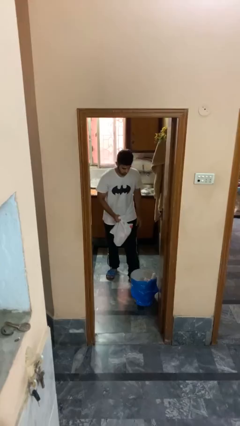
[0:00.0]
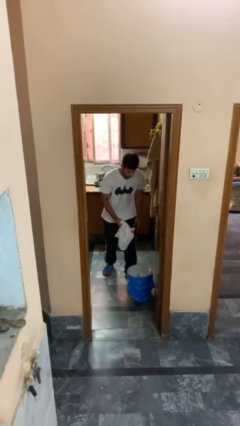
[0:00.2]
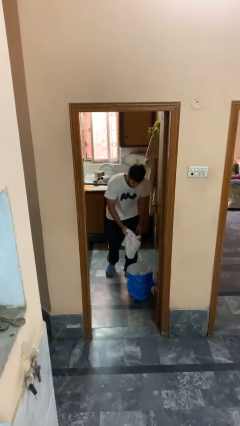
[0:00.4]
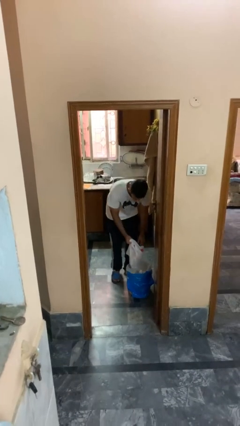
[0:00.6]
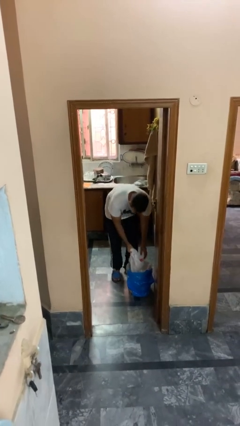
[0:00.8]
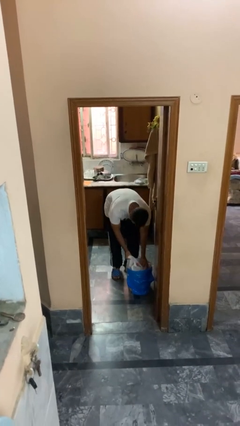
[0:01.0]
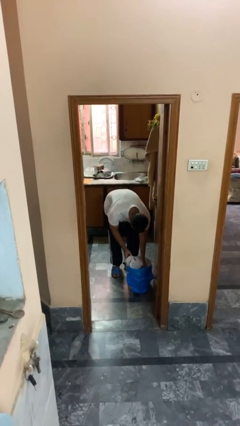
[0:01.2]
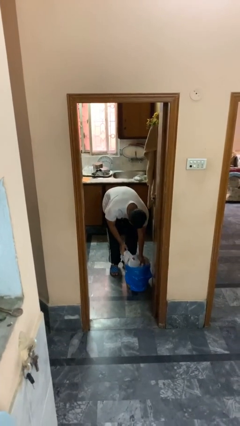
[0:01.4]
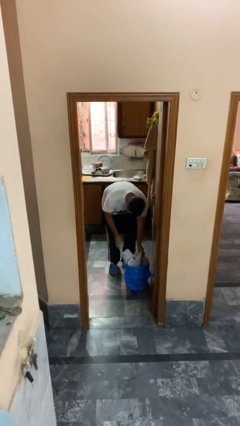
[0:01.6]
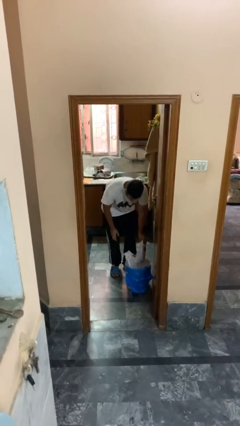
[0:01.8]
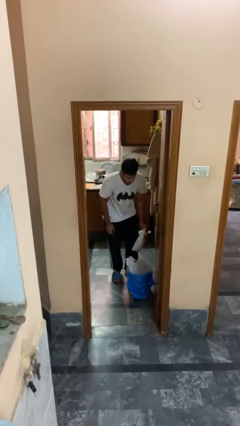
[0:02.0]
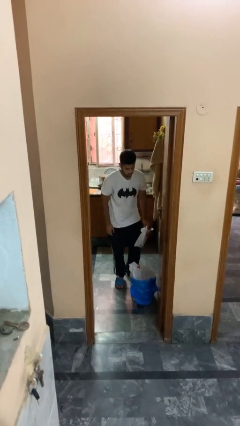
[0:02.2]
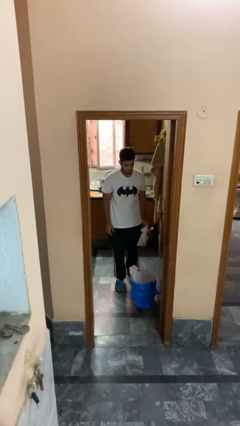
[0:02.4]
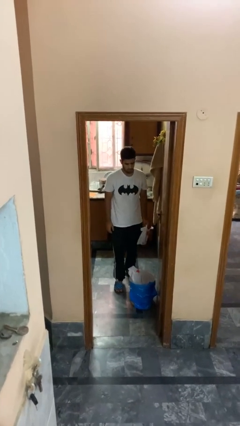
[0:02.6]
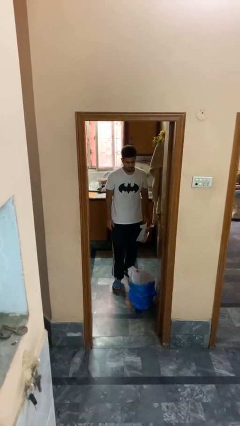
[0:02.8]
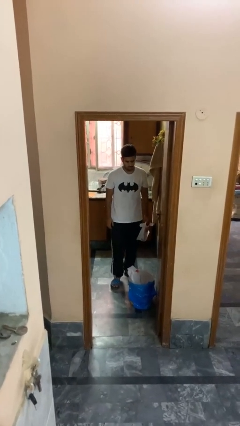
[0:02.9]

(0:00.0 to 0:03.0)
person discards trash

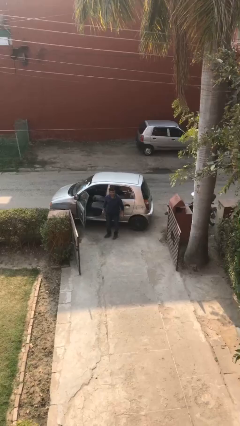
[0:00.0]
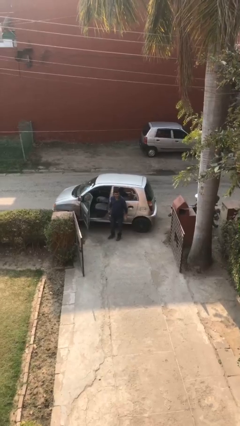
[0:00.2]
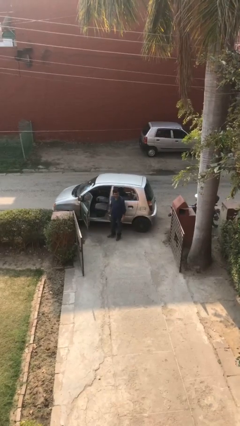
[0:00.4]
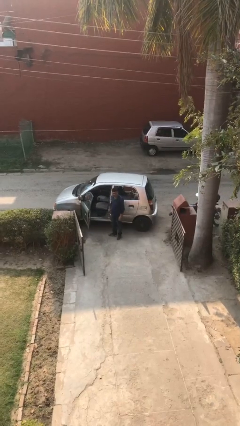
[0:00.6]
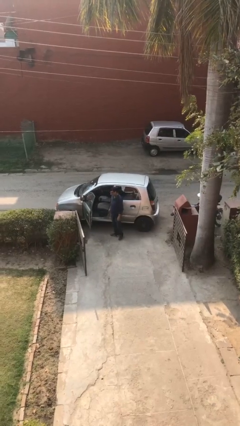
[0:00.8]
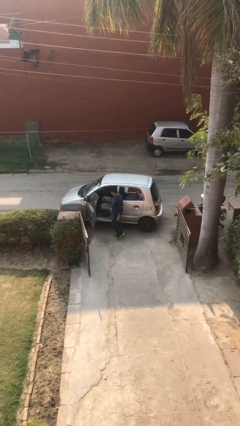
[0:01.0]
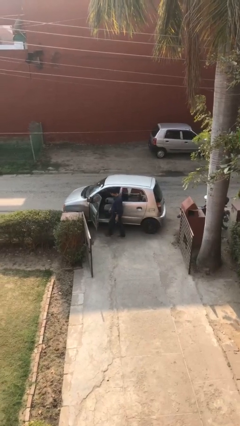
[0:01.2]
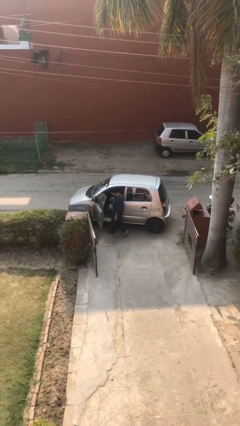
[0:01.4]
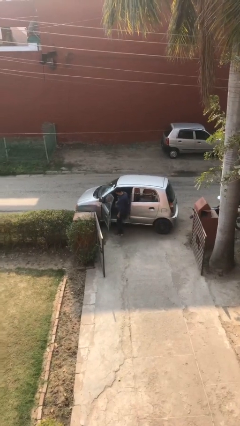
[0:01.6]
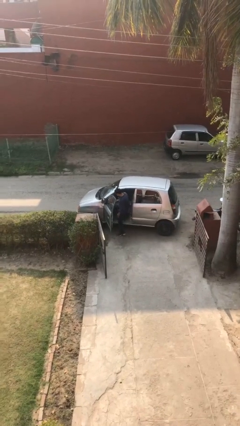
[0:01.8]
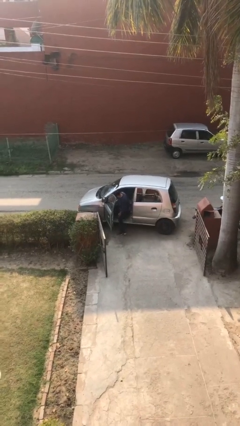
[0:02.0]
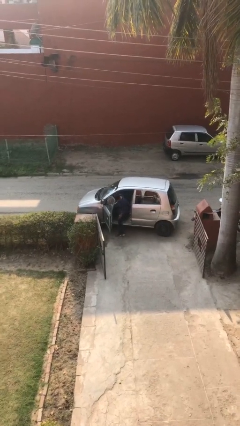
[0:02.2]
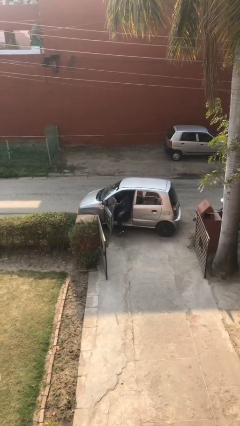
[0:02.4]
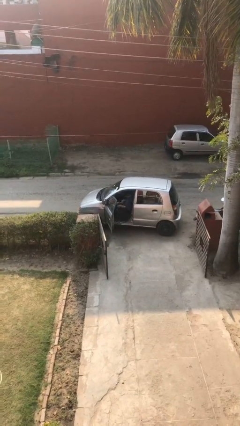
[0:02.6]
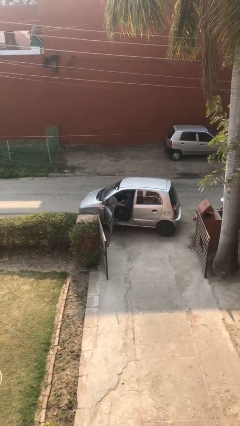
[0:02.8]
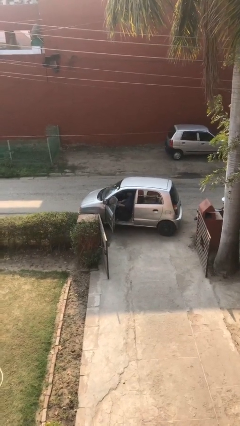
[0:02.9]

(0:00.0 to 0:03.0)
person enters car

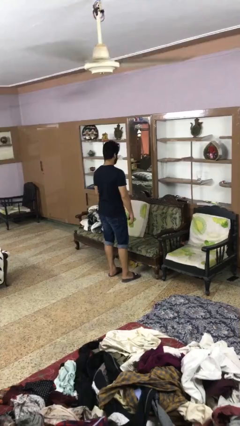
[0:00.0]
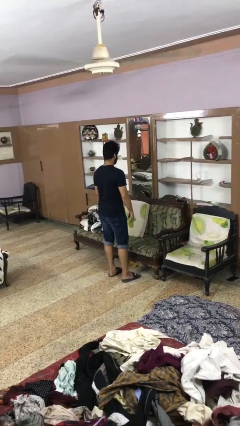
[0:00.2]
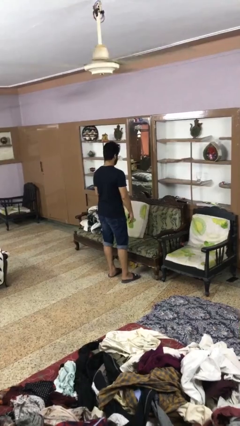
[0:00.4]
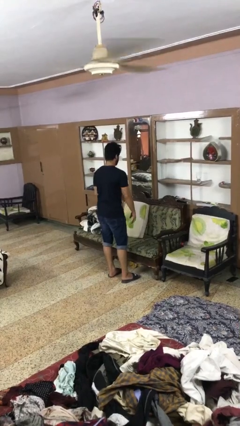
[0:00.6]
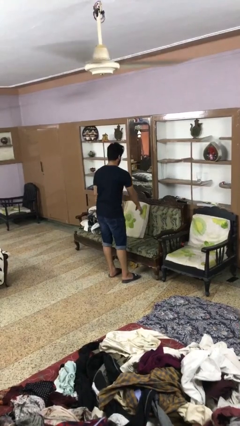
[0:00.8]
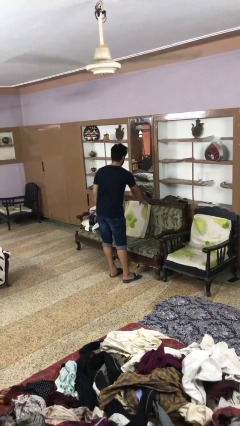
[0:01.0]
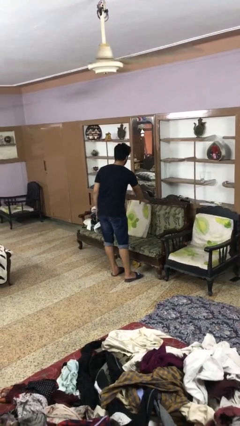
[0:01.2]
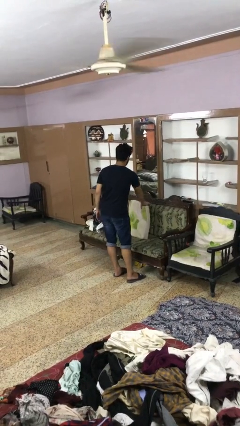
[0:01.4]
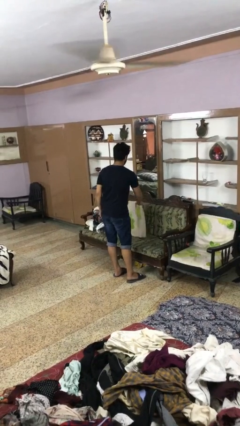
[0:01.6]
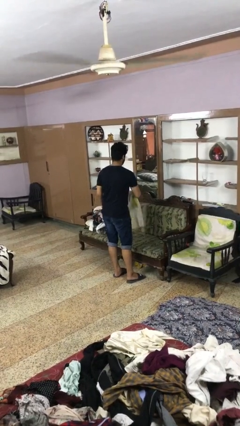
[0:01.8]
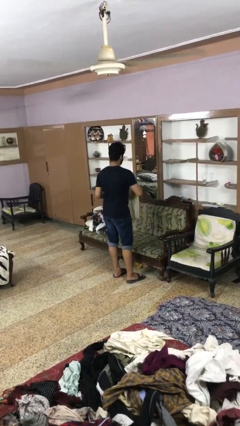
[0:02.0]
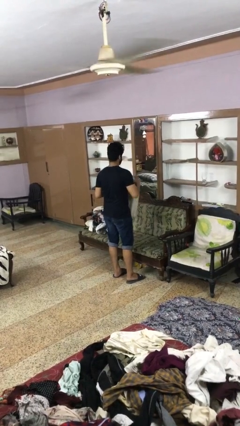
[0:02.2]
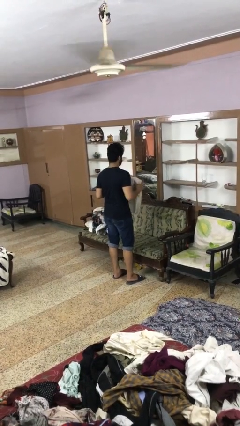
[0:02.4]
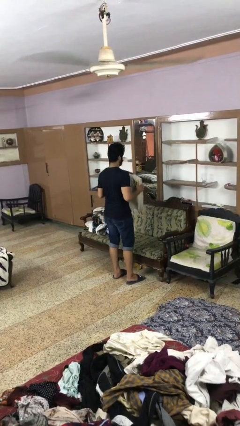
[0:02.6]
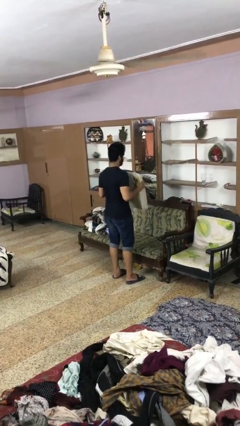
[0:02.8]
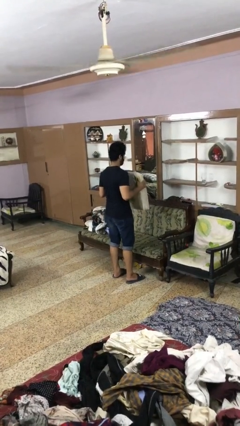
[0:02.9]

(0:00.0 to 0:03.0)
person picks up object from couch

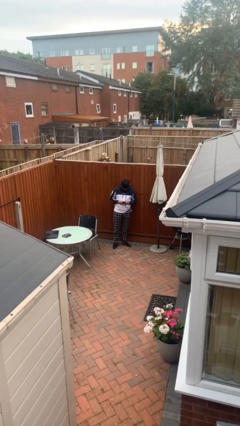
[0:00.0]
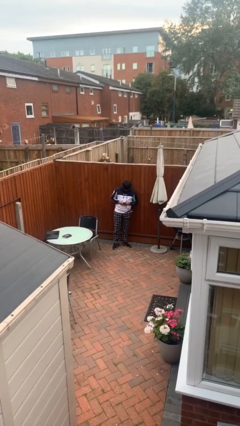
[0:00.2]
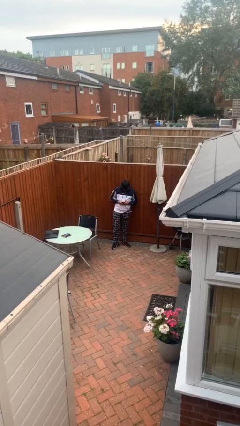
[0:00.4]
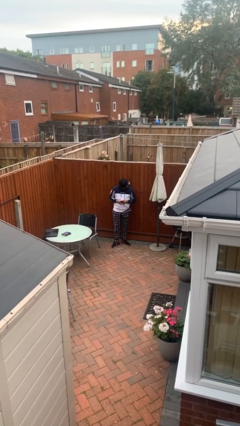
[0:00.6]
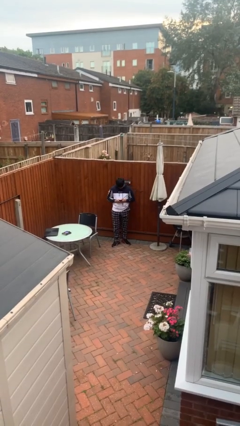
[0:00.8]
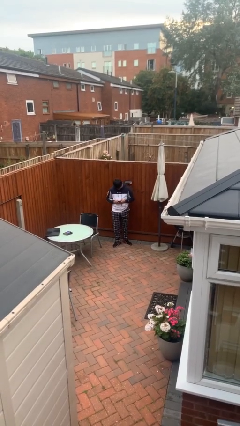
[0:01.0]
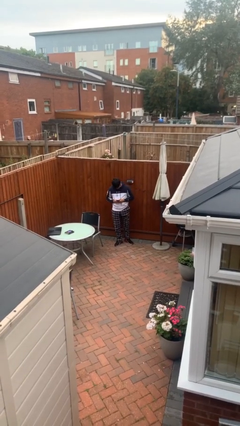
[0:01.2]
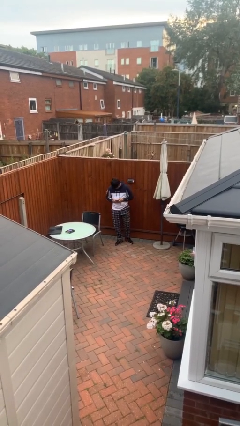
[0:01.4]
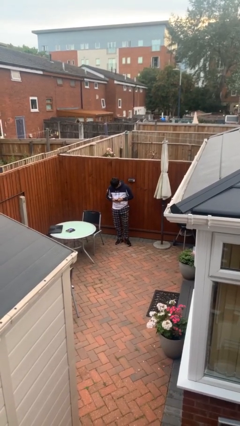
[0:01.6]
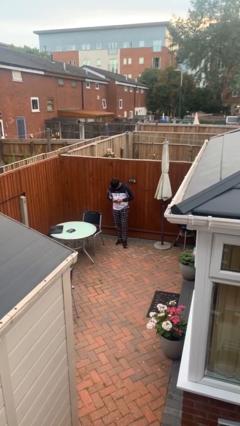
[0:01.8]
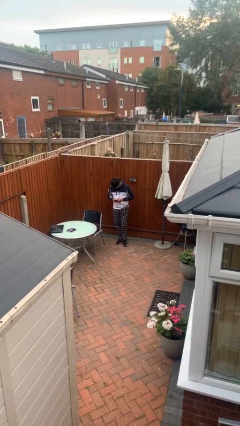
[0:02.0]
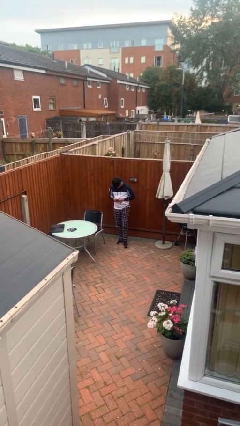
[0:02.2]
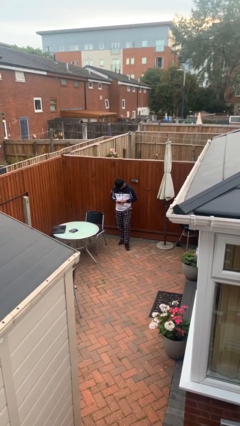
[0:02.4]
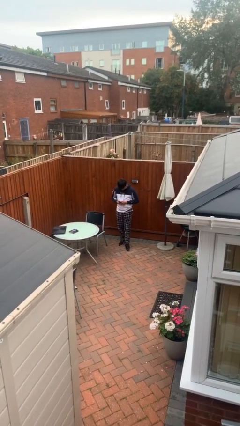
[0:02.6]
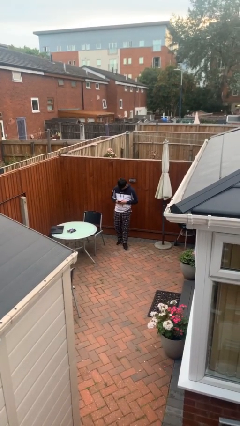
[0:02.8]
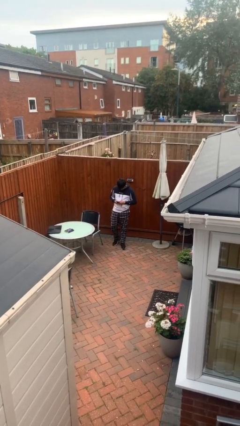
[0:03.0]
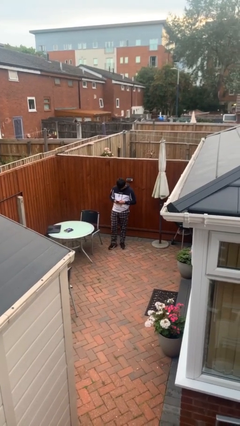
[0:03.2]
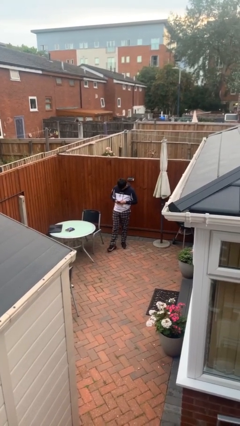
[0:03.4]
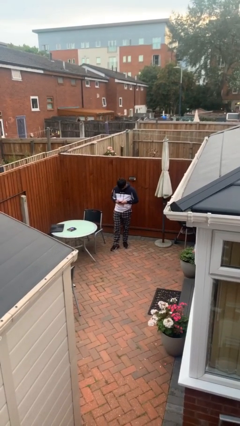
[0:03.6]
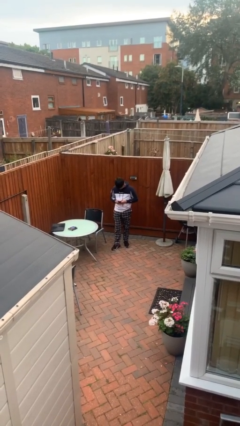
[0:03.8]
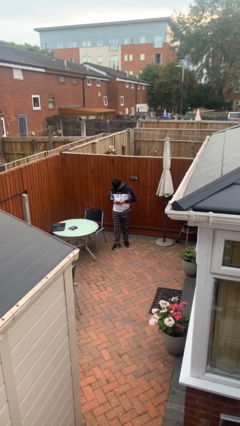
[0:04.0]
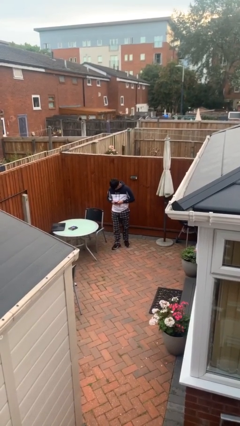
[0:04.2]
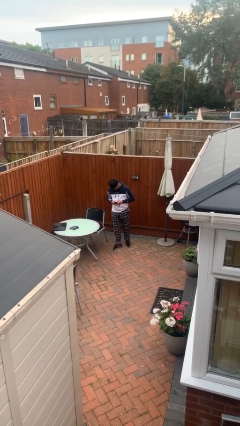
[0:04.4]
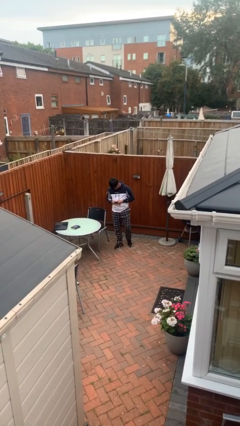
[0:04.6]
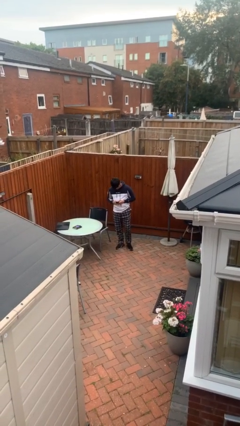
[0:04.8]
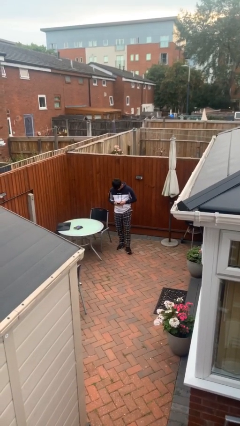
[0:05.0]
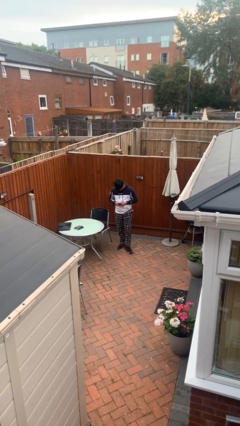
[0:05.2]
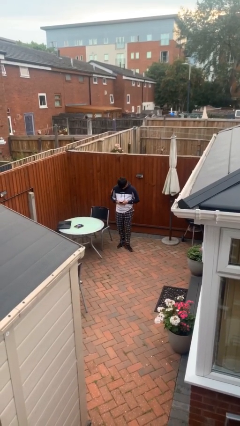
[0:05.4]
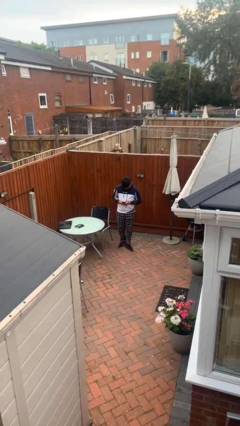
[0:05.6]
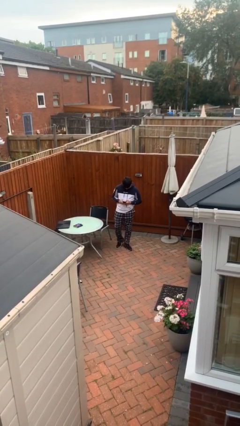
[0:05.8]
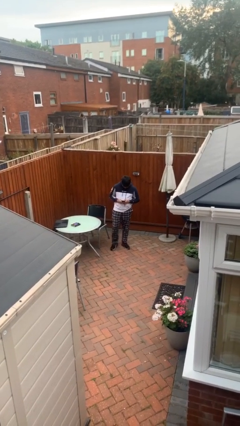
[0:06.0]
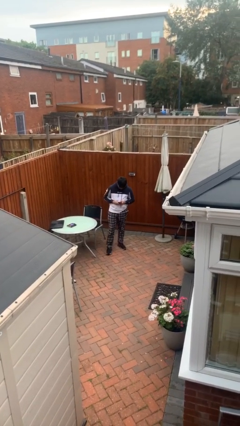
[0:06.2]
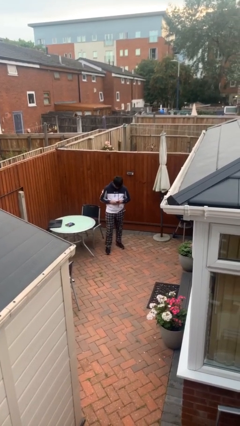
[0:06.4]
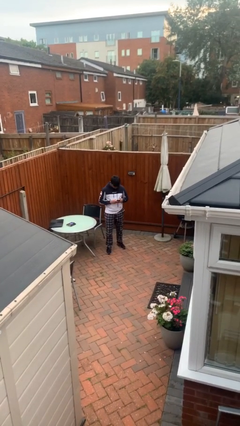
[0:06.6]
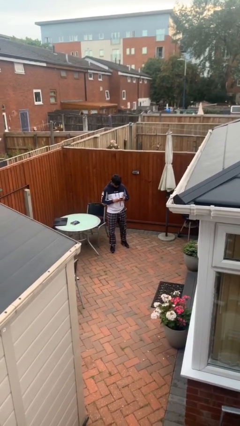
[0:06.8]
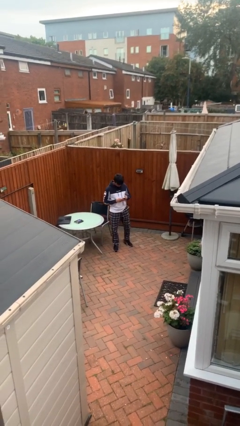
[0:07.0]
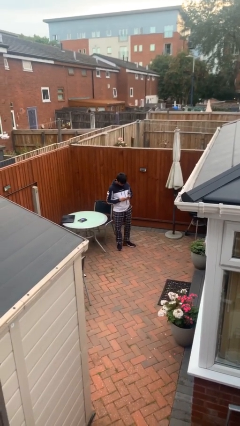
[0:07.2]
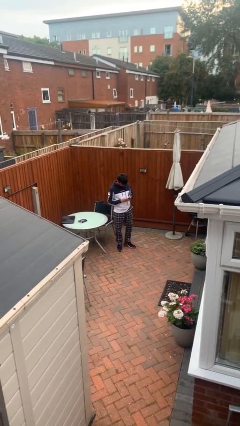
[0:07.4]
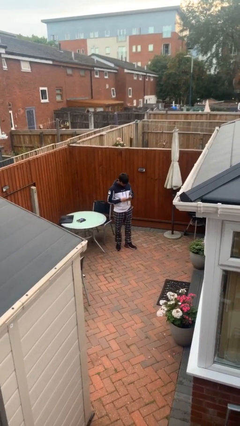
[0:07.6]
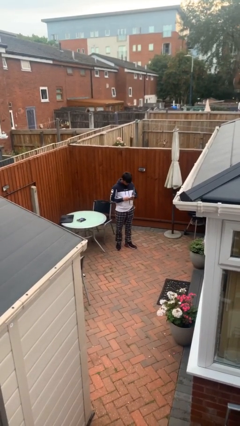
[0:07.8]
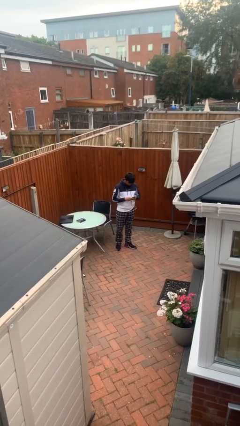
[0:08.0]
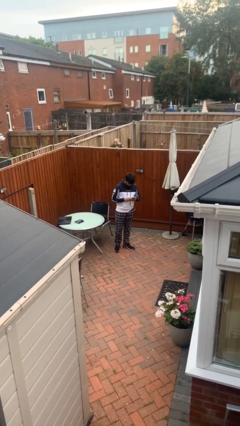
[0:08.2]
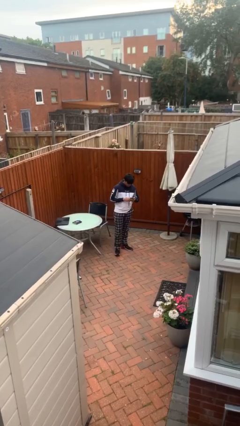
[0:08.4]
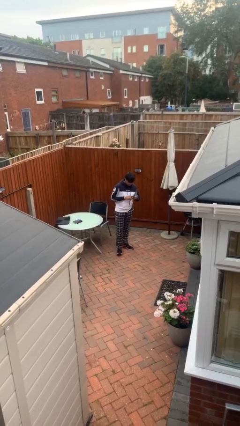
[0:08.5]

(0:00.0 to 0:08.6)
person texts on phone

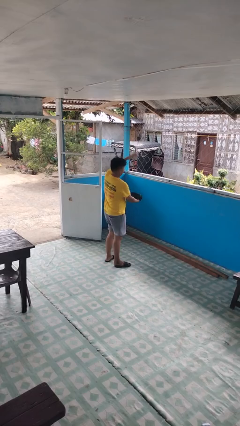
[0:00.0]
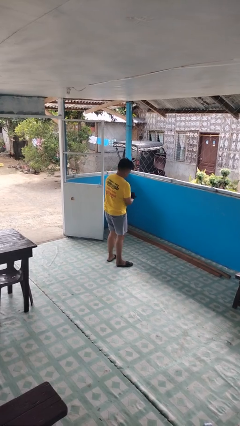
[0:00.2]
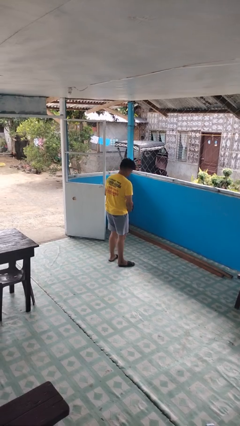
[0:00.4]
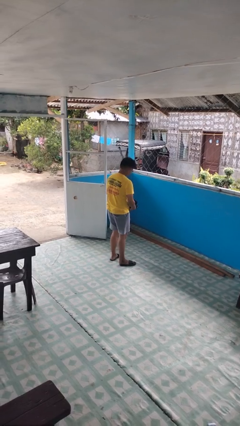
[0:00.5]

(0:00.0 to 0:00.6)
person catches dropped object
